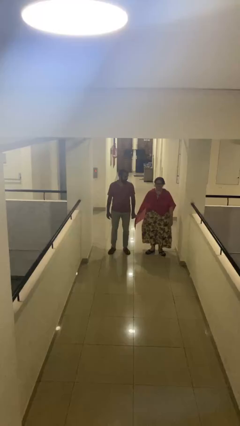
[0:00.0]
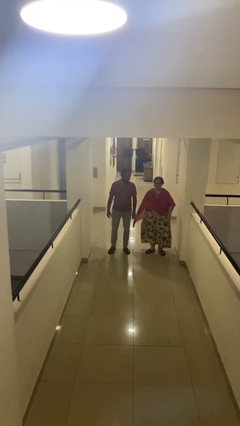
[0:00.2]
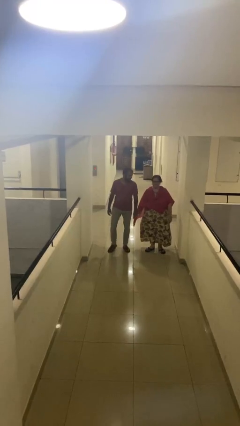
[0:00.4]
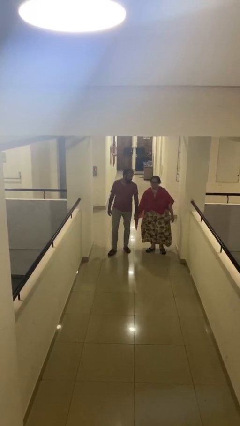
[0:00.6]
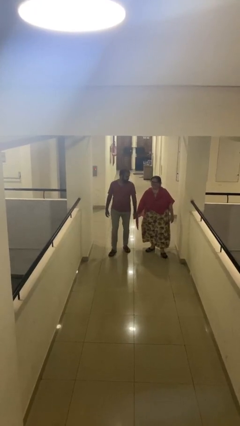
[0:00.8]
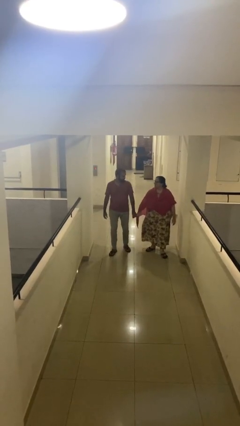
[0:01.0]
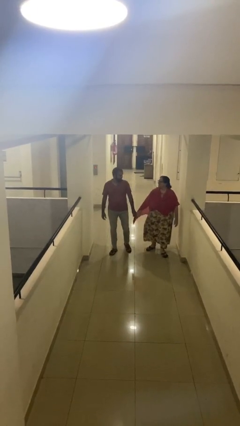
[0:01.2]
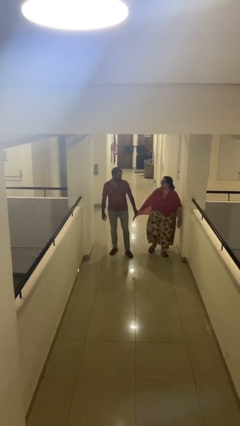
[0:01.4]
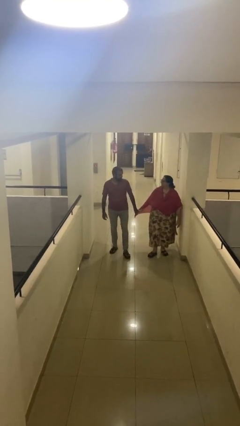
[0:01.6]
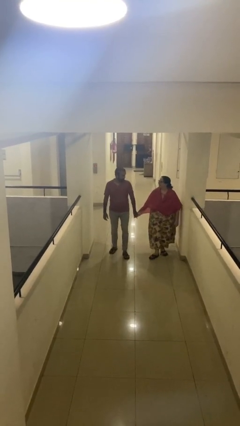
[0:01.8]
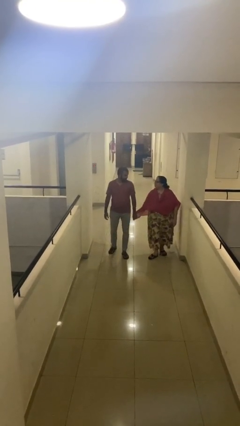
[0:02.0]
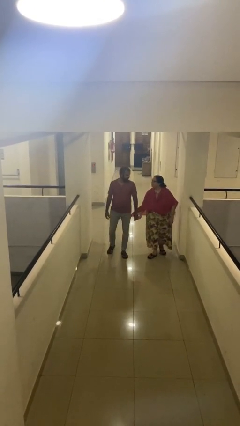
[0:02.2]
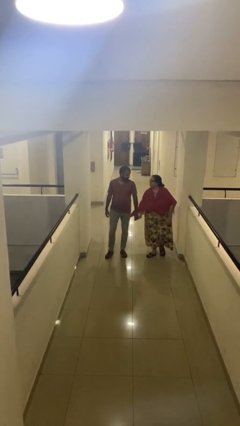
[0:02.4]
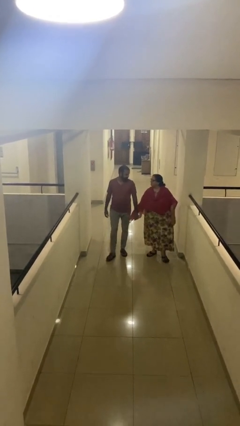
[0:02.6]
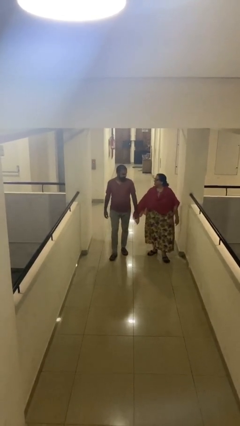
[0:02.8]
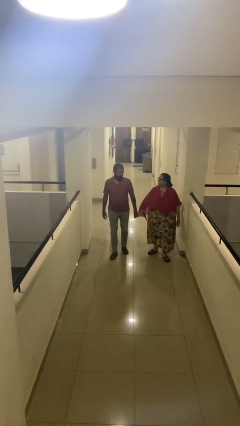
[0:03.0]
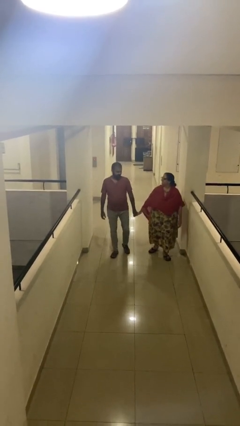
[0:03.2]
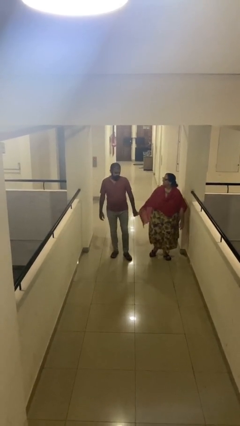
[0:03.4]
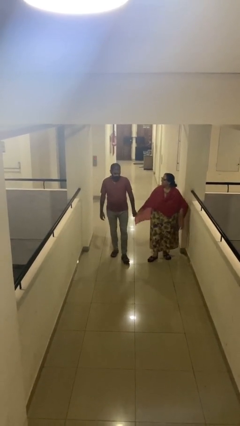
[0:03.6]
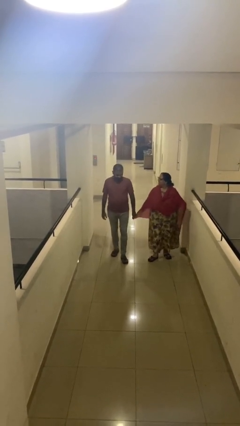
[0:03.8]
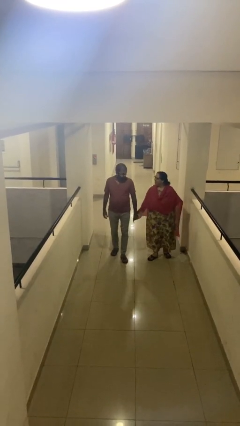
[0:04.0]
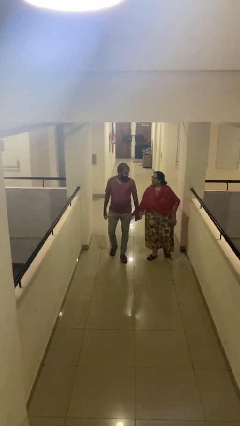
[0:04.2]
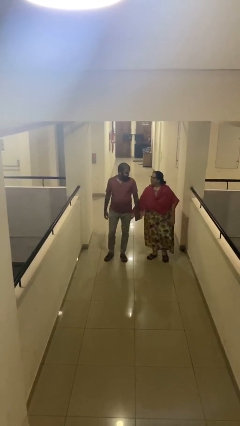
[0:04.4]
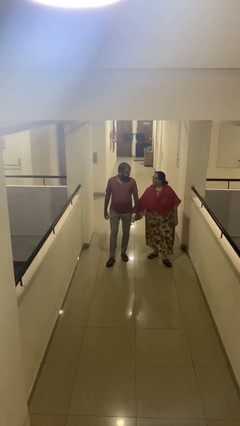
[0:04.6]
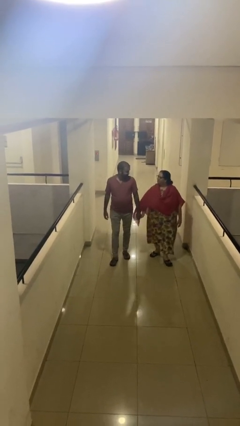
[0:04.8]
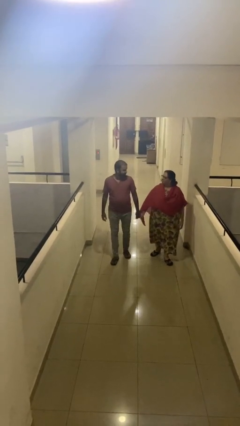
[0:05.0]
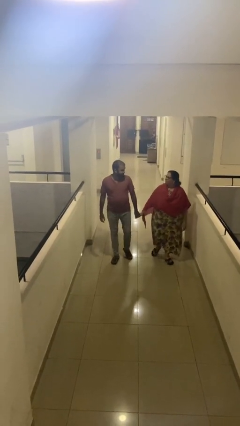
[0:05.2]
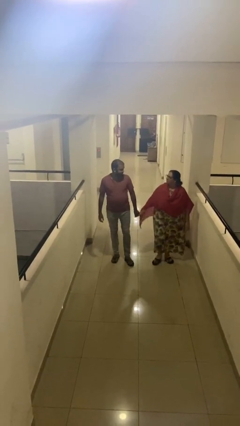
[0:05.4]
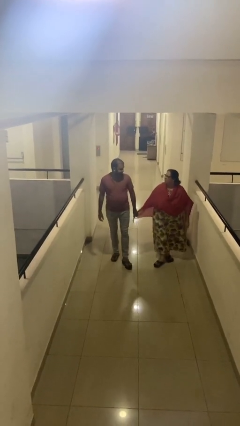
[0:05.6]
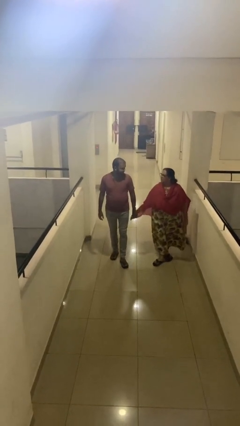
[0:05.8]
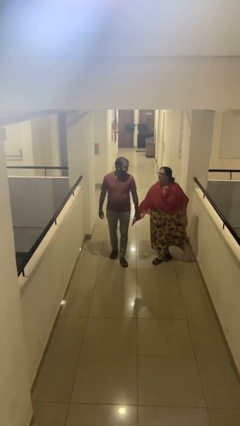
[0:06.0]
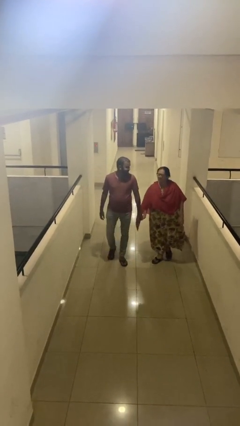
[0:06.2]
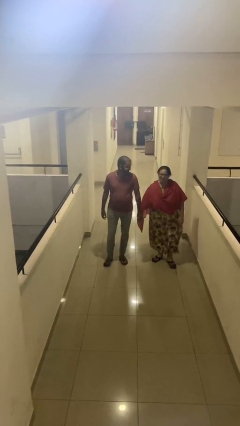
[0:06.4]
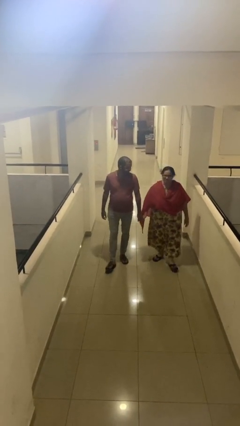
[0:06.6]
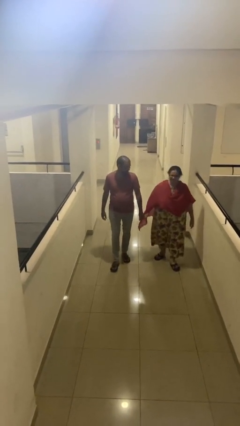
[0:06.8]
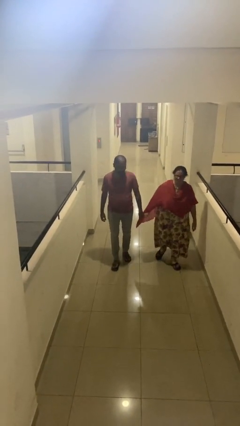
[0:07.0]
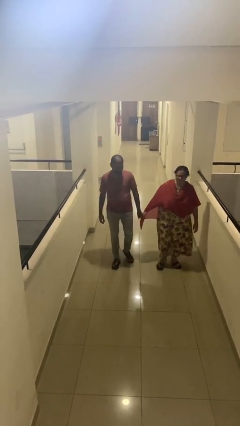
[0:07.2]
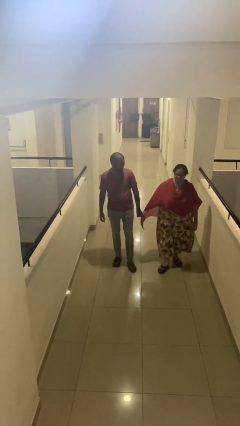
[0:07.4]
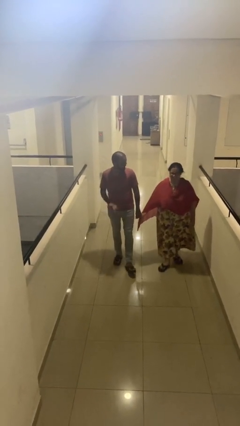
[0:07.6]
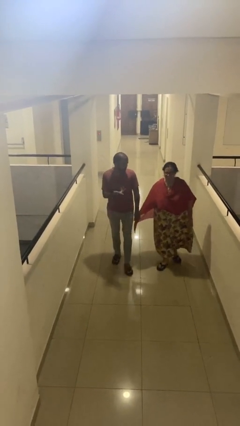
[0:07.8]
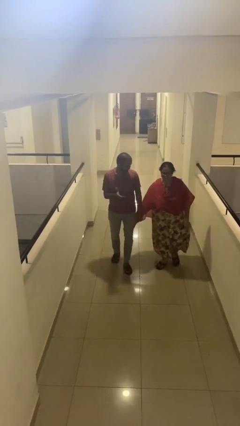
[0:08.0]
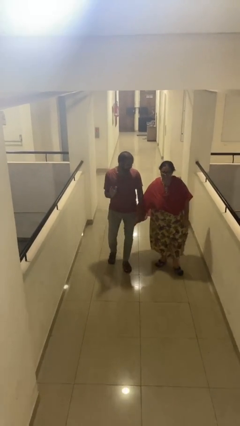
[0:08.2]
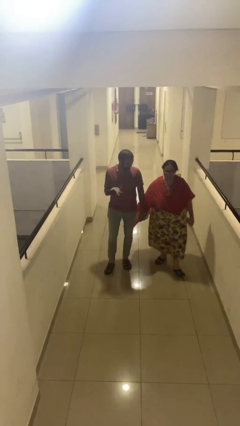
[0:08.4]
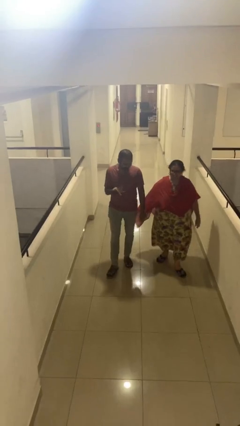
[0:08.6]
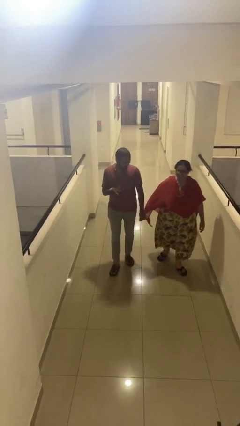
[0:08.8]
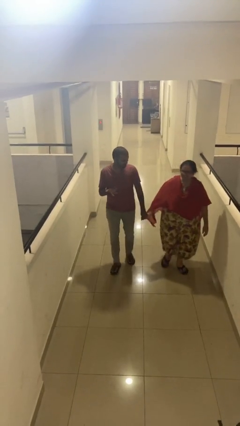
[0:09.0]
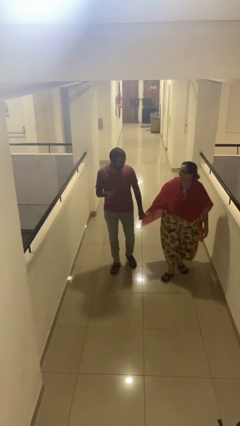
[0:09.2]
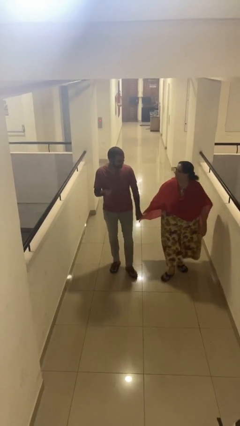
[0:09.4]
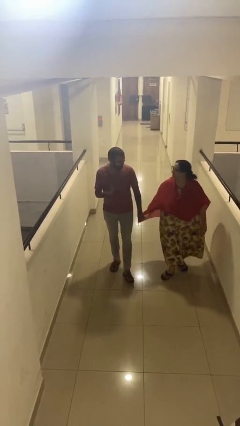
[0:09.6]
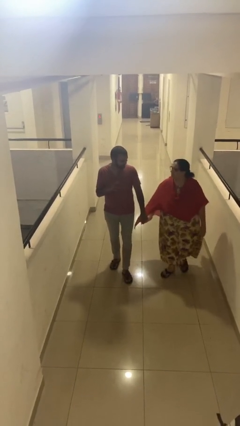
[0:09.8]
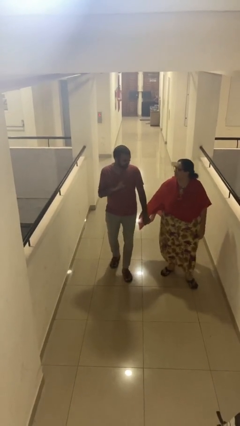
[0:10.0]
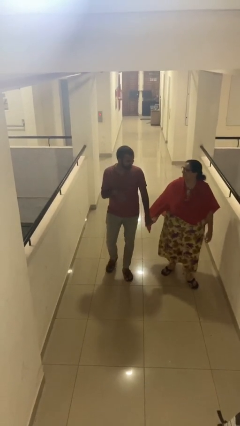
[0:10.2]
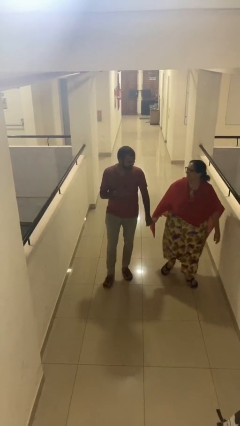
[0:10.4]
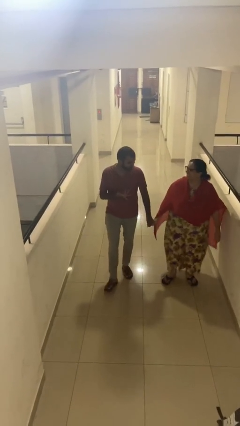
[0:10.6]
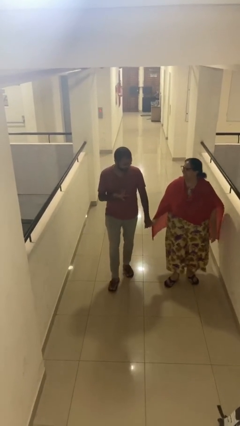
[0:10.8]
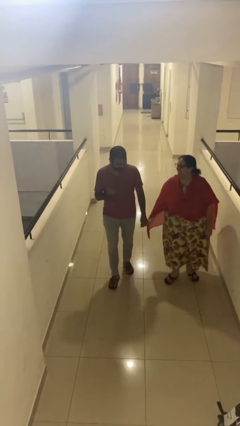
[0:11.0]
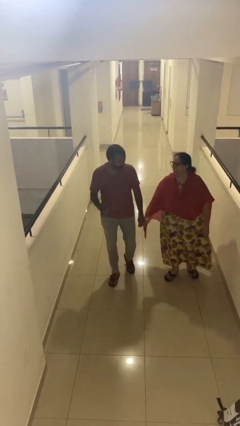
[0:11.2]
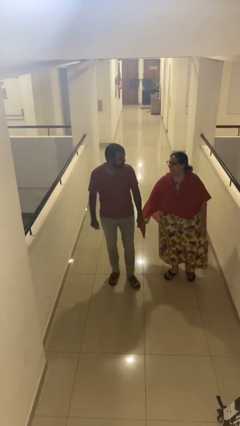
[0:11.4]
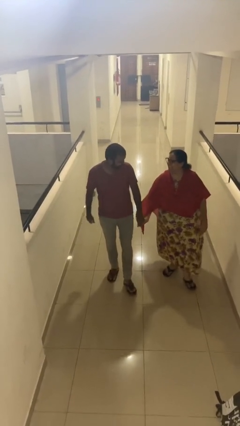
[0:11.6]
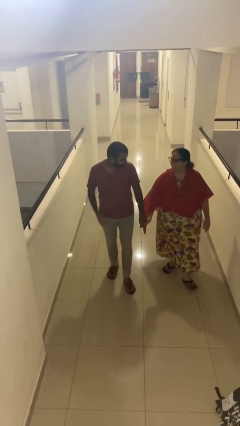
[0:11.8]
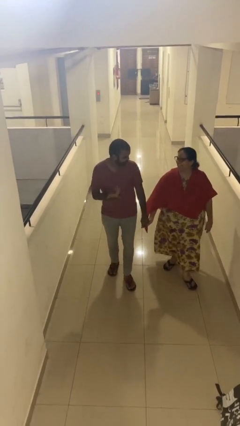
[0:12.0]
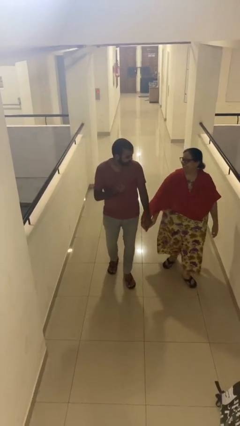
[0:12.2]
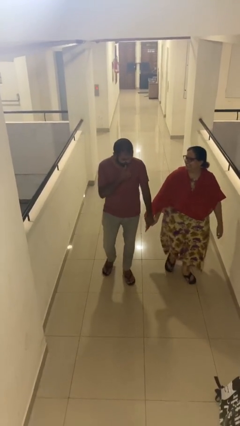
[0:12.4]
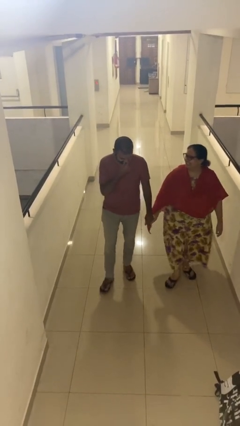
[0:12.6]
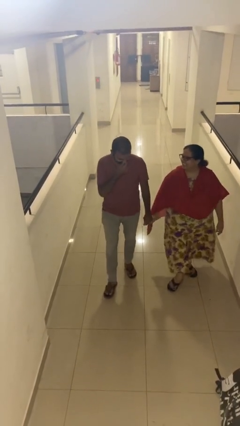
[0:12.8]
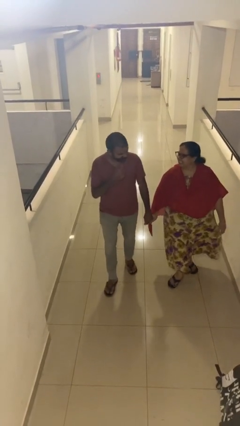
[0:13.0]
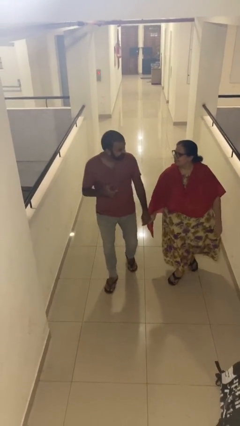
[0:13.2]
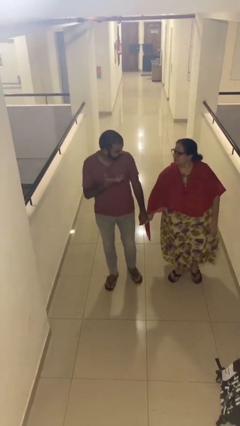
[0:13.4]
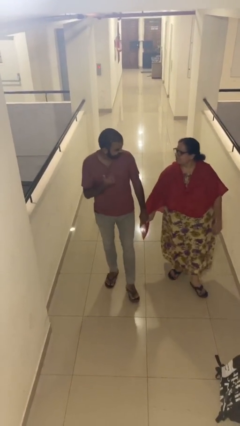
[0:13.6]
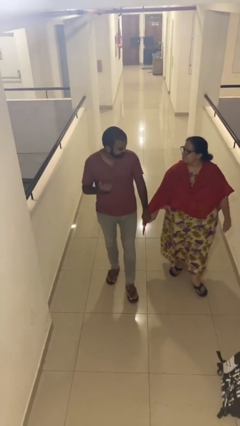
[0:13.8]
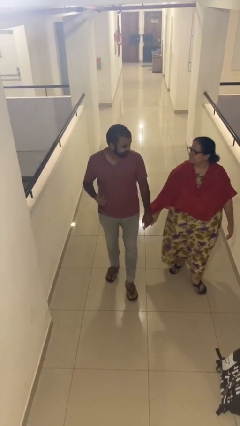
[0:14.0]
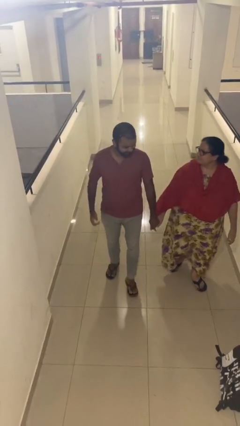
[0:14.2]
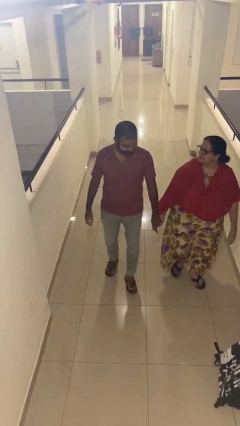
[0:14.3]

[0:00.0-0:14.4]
person holds hand

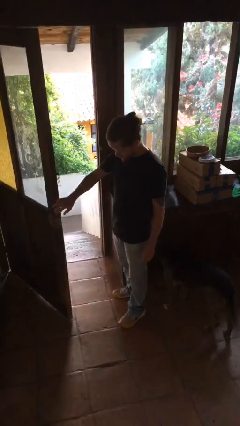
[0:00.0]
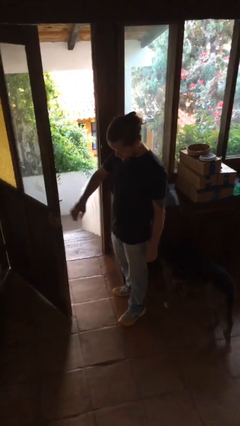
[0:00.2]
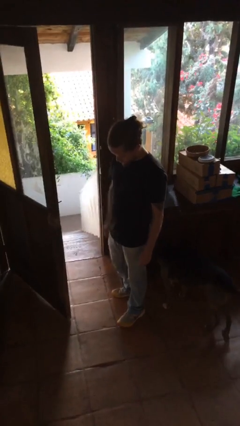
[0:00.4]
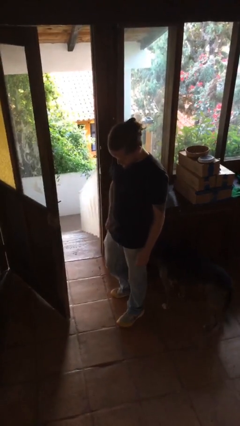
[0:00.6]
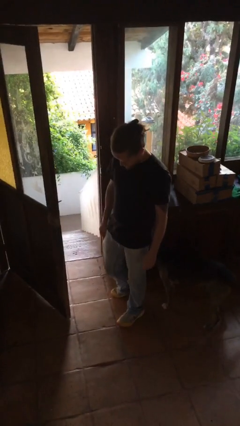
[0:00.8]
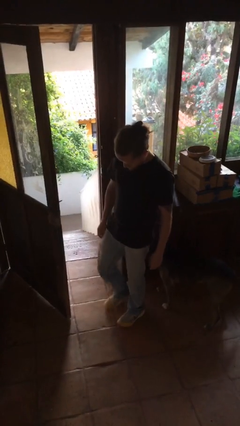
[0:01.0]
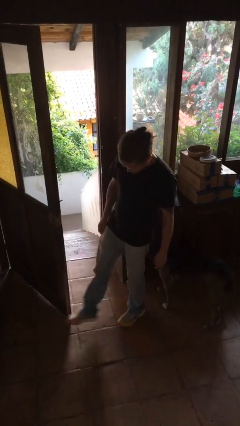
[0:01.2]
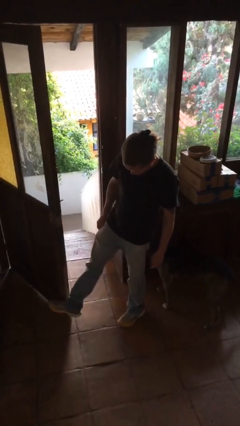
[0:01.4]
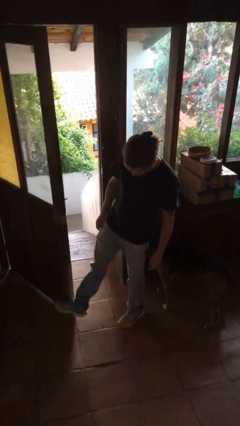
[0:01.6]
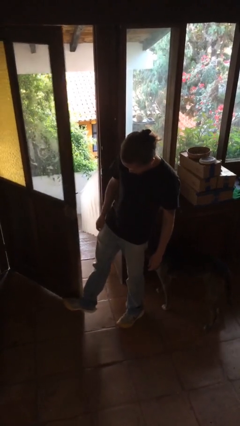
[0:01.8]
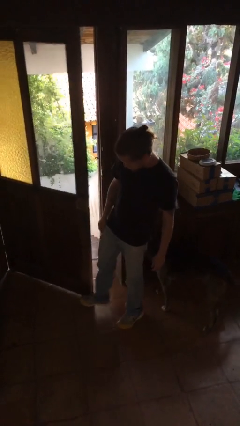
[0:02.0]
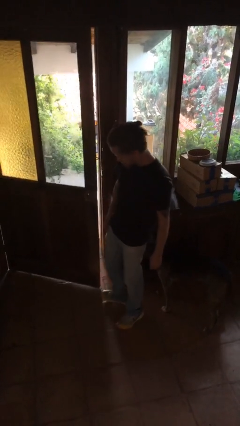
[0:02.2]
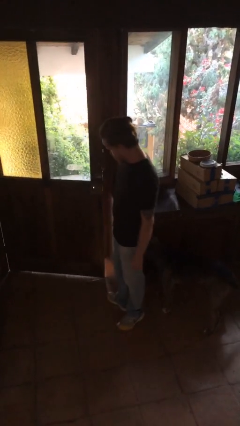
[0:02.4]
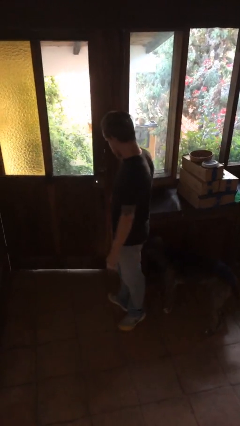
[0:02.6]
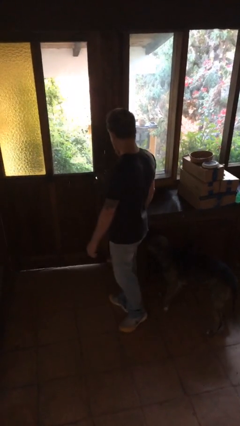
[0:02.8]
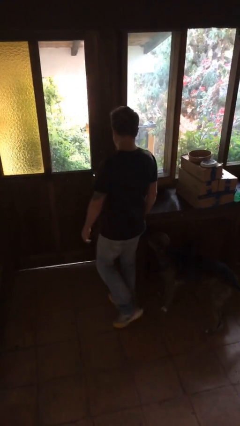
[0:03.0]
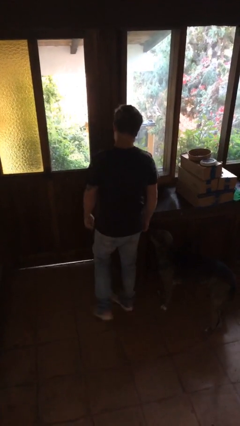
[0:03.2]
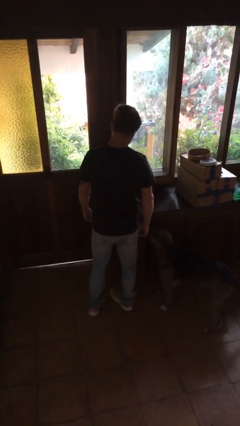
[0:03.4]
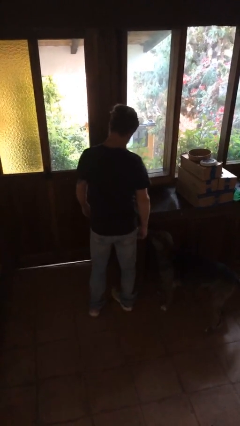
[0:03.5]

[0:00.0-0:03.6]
person closes door with foot

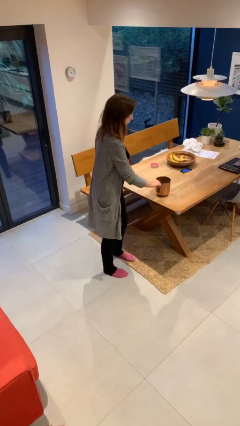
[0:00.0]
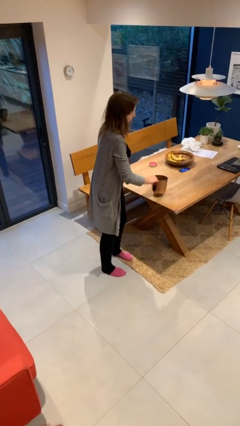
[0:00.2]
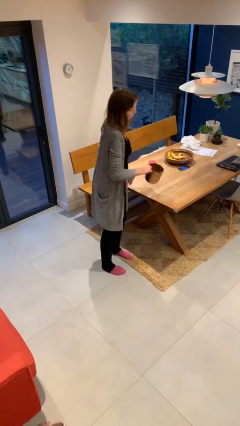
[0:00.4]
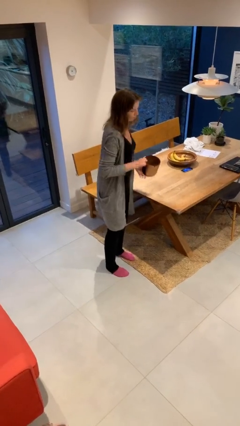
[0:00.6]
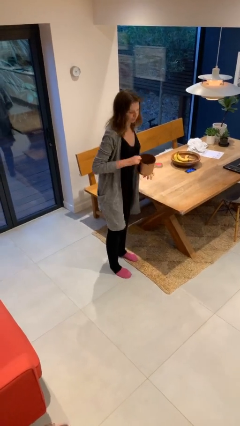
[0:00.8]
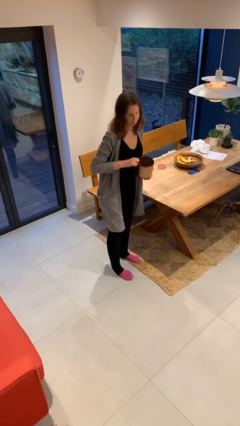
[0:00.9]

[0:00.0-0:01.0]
person picks up object from table
